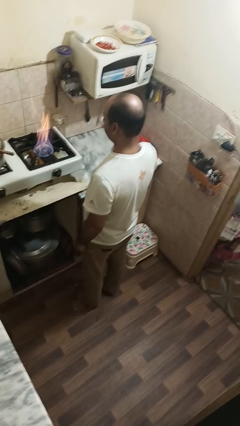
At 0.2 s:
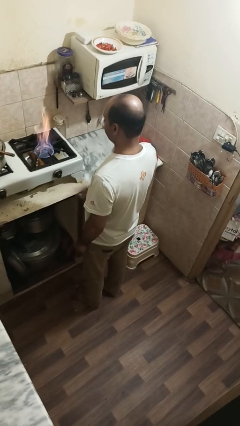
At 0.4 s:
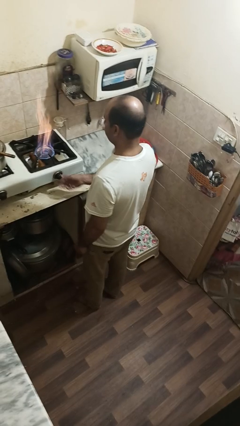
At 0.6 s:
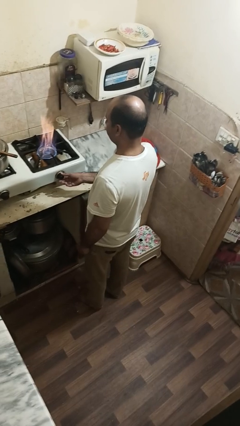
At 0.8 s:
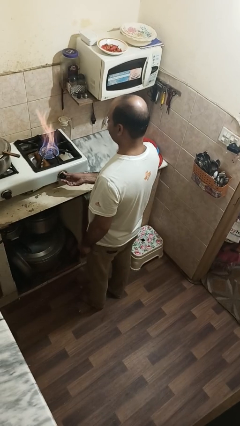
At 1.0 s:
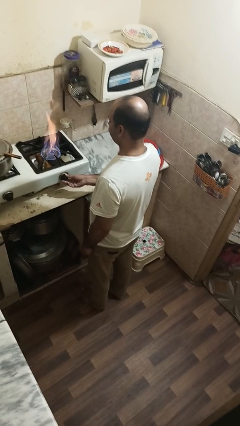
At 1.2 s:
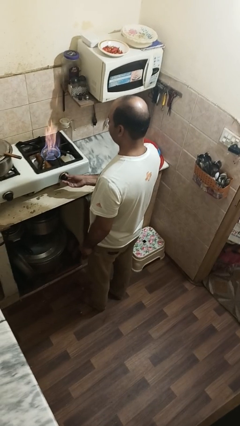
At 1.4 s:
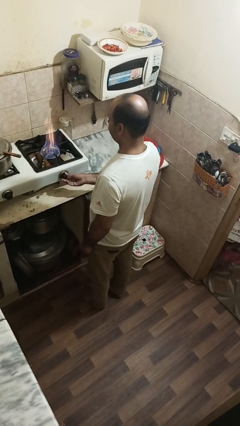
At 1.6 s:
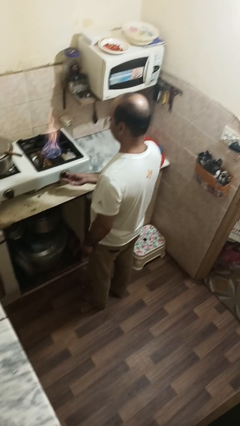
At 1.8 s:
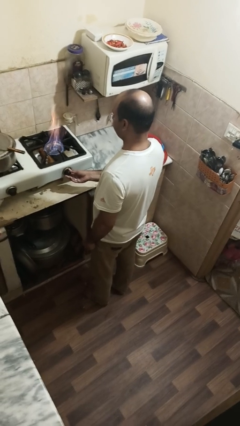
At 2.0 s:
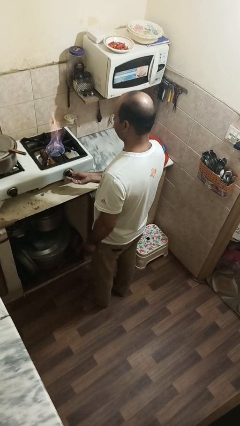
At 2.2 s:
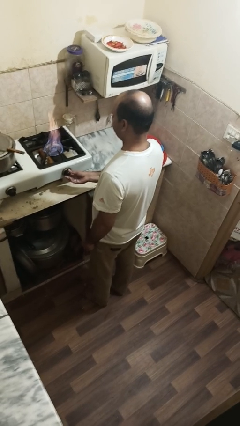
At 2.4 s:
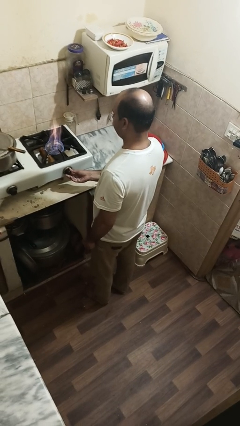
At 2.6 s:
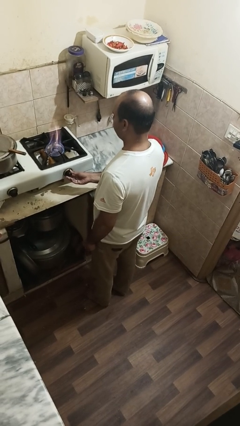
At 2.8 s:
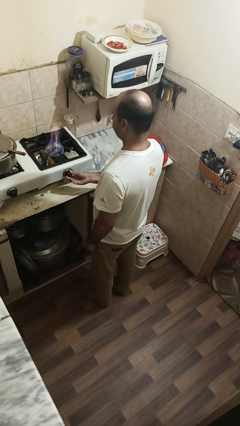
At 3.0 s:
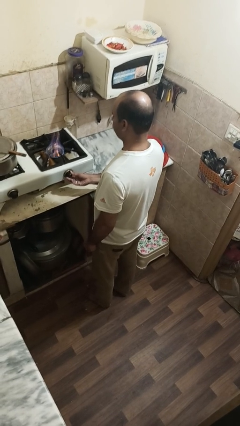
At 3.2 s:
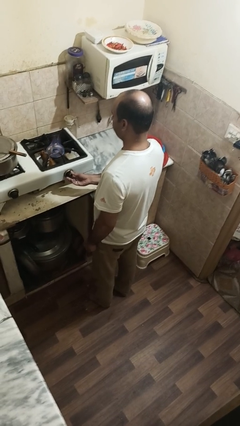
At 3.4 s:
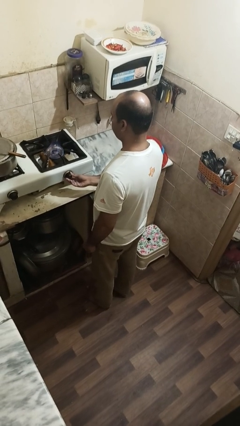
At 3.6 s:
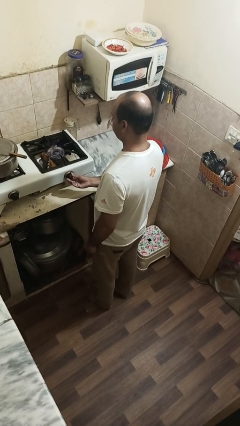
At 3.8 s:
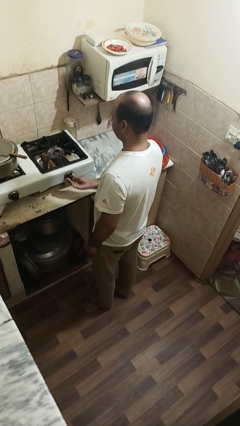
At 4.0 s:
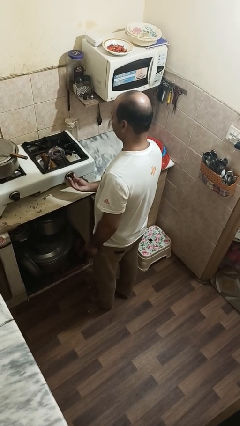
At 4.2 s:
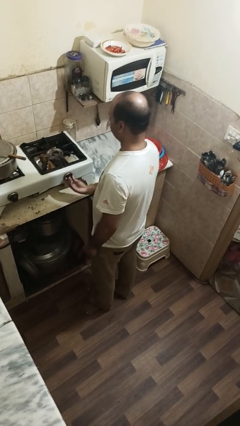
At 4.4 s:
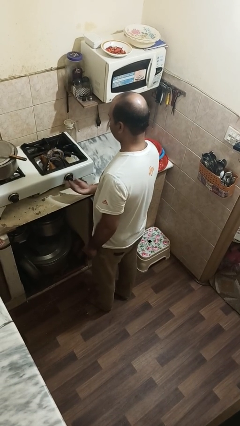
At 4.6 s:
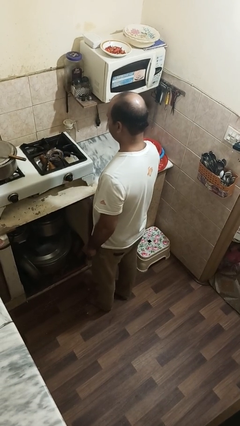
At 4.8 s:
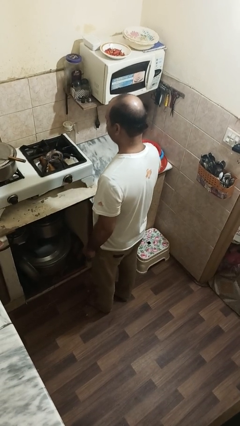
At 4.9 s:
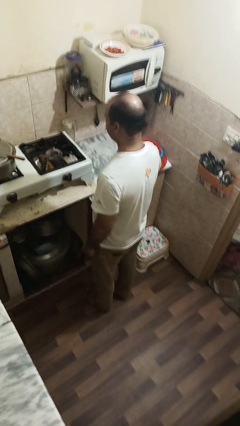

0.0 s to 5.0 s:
person turns off stovetop

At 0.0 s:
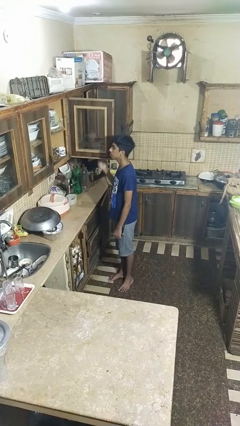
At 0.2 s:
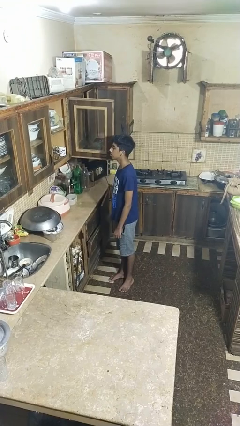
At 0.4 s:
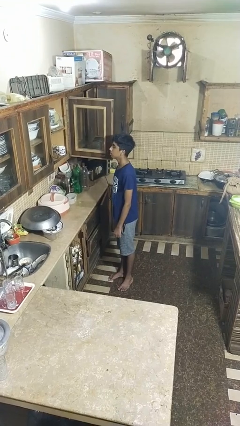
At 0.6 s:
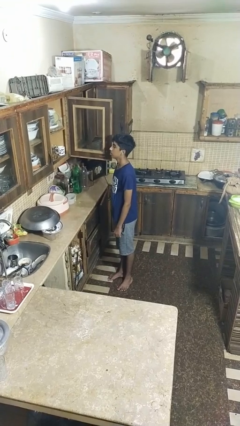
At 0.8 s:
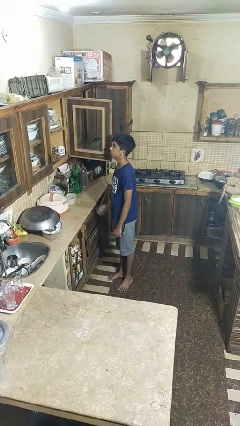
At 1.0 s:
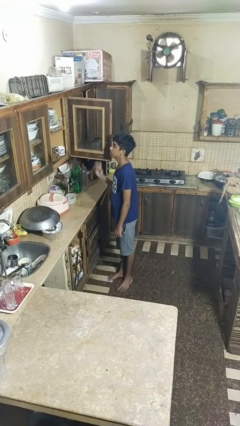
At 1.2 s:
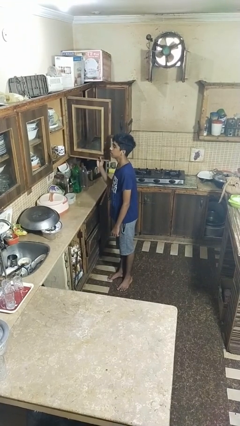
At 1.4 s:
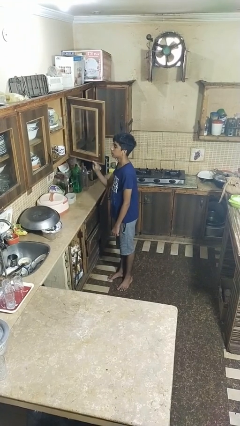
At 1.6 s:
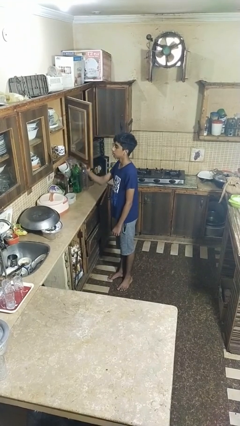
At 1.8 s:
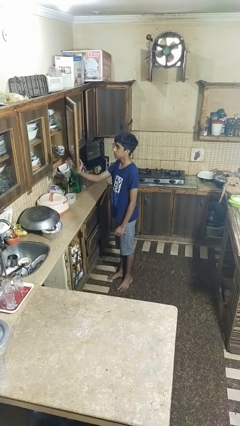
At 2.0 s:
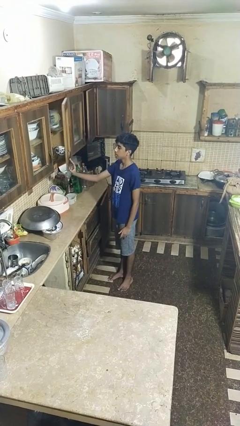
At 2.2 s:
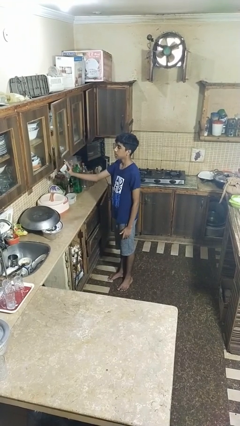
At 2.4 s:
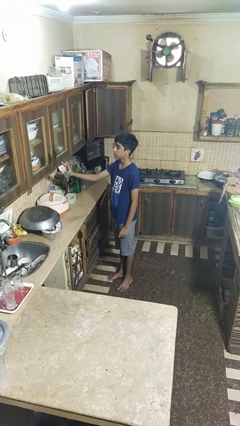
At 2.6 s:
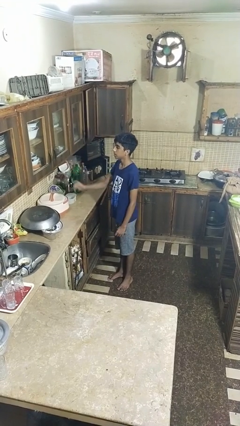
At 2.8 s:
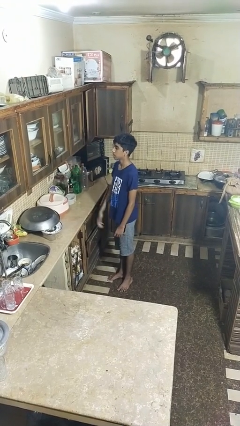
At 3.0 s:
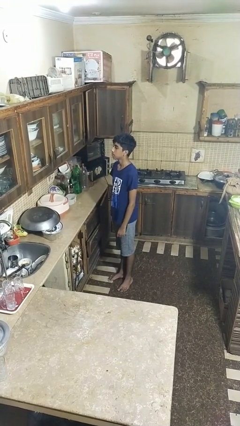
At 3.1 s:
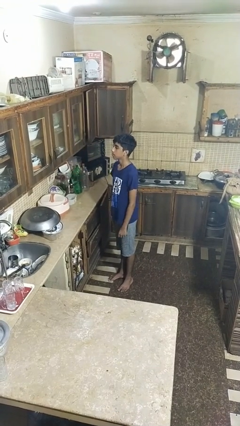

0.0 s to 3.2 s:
person closes cabinet

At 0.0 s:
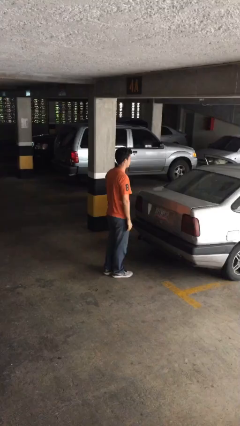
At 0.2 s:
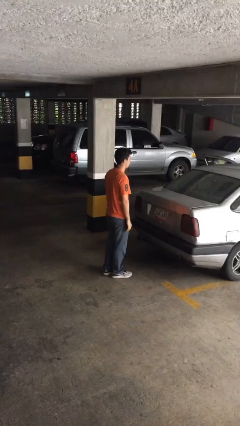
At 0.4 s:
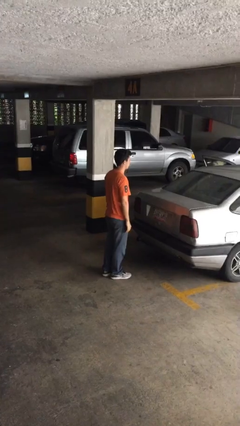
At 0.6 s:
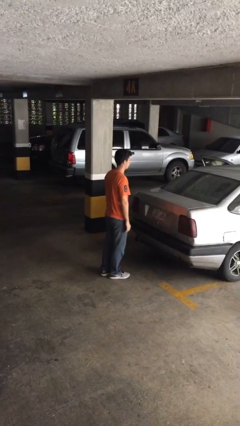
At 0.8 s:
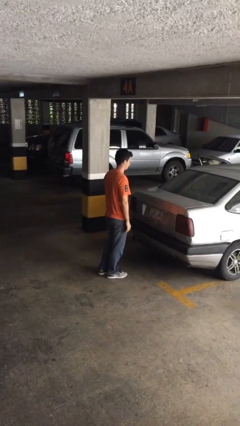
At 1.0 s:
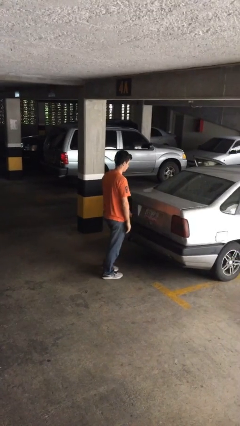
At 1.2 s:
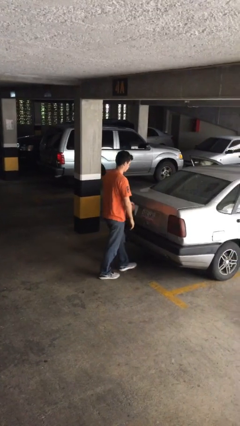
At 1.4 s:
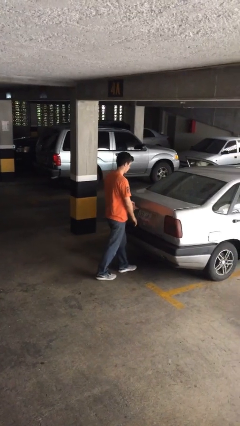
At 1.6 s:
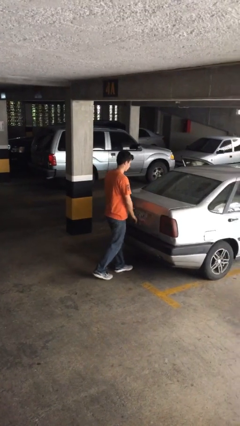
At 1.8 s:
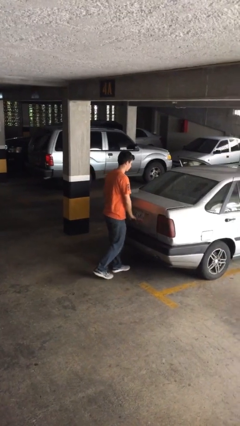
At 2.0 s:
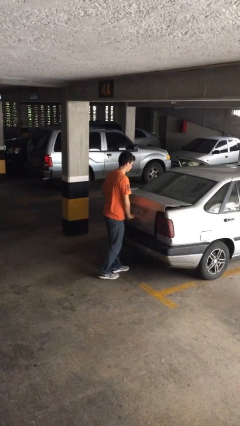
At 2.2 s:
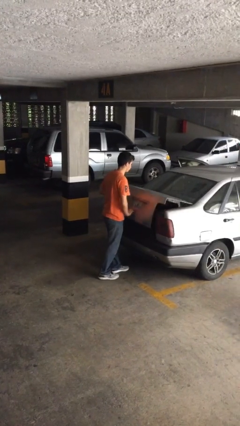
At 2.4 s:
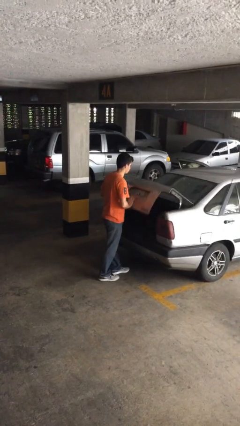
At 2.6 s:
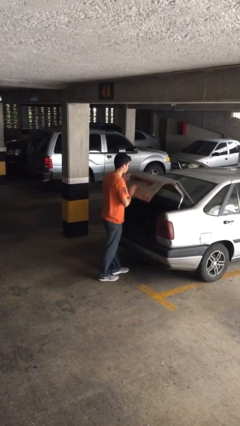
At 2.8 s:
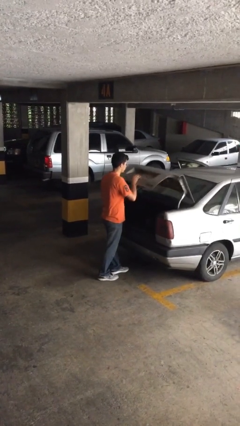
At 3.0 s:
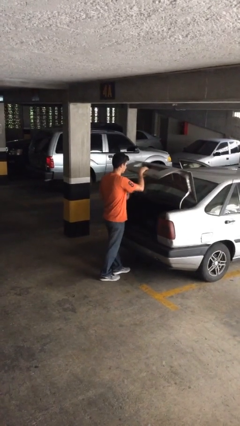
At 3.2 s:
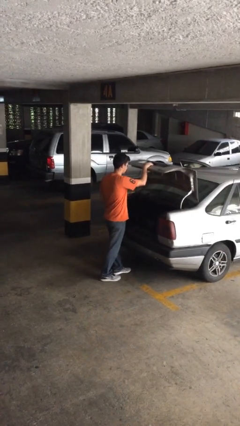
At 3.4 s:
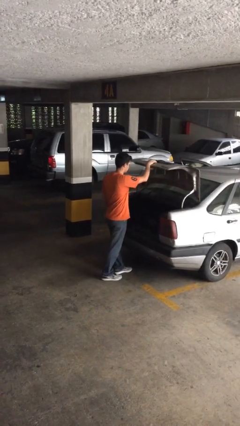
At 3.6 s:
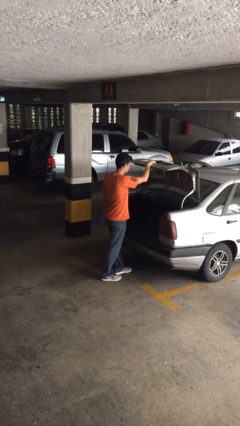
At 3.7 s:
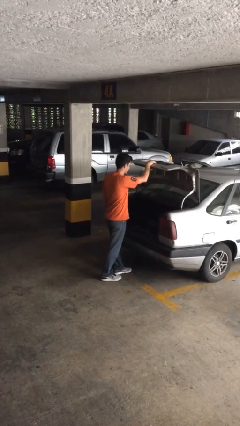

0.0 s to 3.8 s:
person opens car trunk

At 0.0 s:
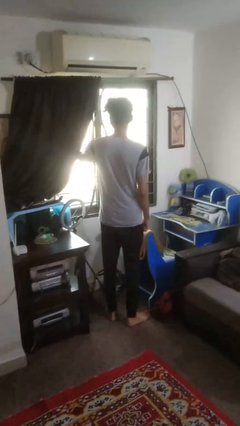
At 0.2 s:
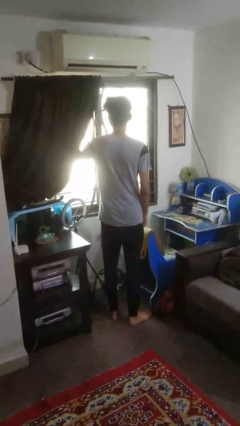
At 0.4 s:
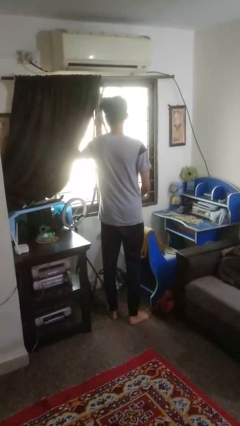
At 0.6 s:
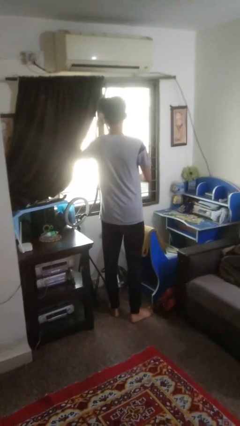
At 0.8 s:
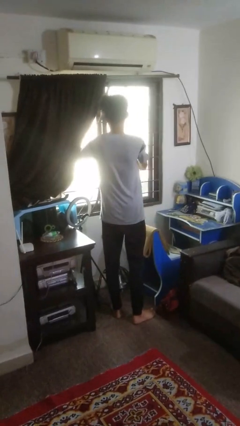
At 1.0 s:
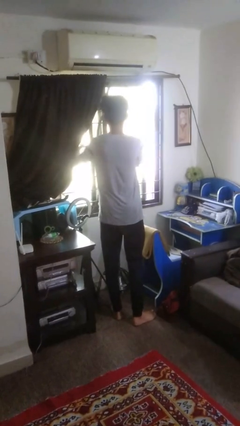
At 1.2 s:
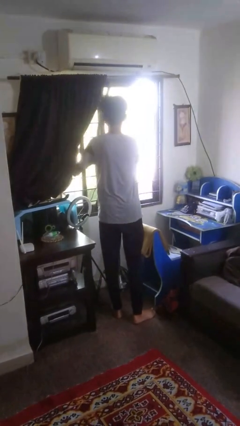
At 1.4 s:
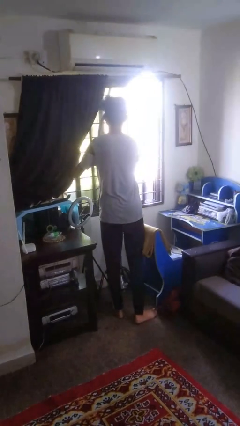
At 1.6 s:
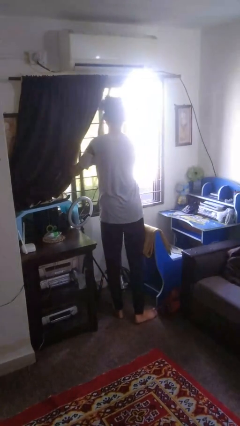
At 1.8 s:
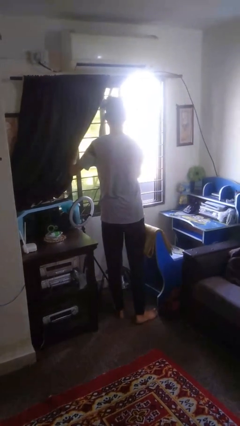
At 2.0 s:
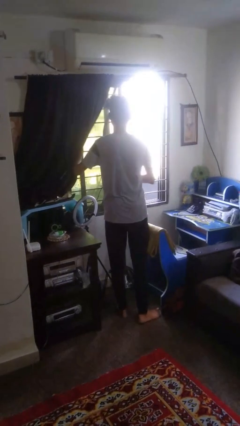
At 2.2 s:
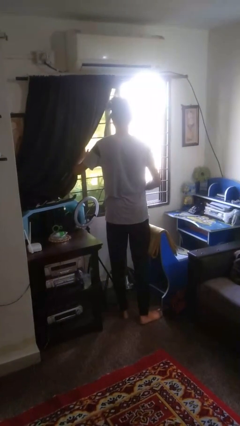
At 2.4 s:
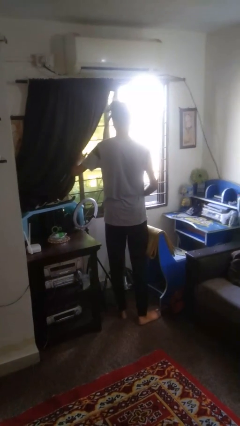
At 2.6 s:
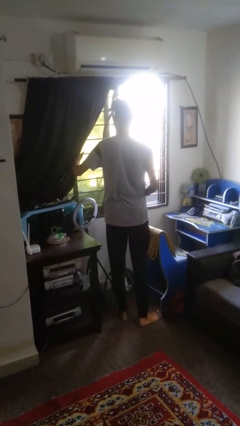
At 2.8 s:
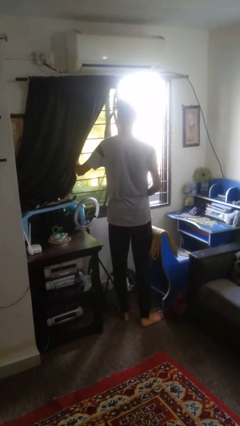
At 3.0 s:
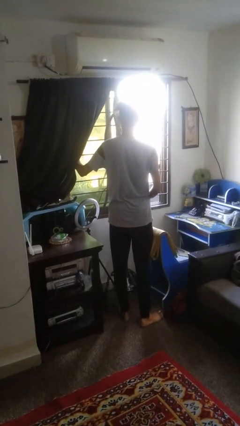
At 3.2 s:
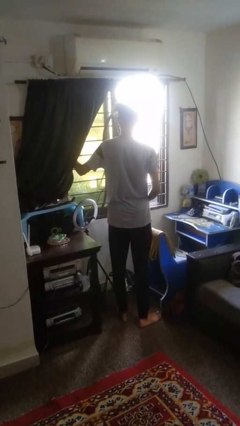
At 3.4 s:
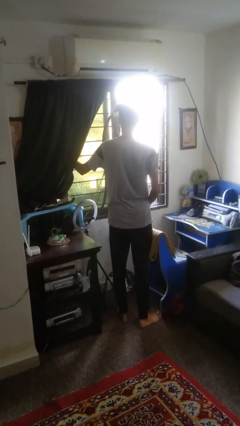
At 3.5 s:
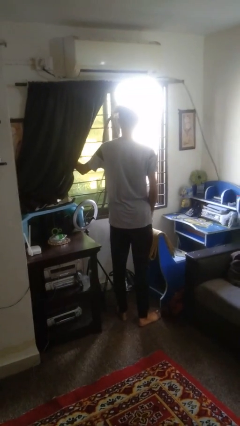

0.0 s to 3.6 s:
person opens home window

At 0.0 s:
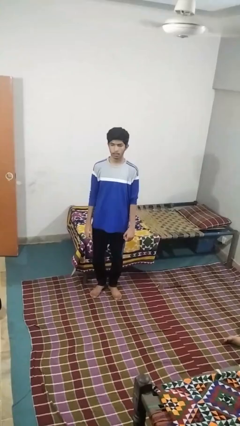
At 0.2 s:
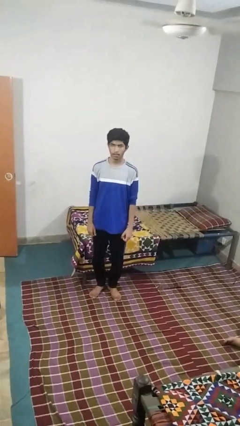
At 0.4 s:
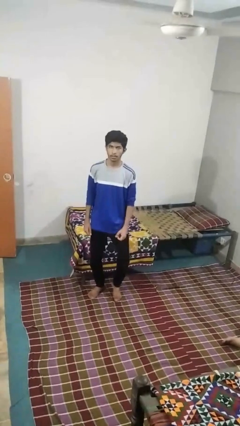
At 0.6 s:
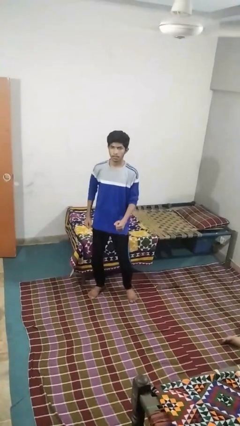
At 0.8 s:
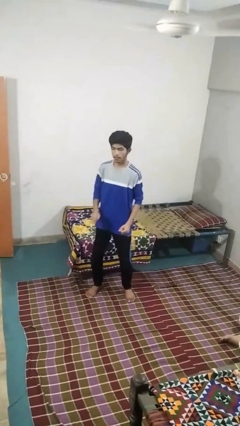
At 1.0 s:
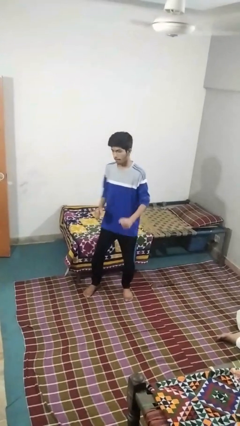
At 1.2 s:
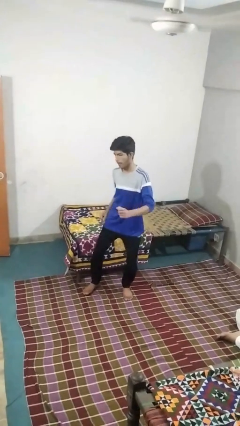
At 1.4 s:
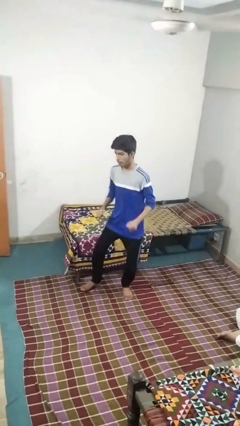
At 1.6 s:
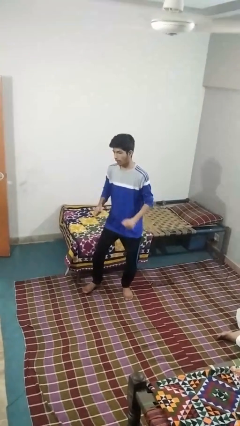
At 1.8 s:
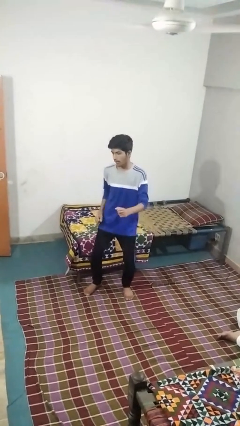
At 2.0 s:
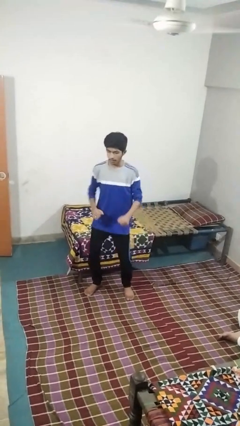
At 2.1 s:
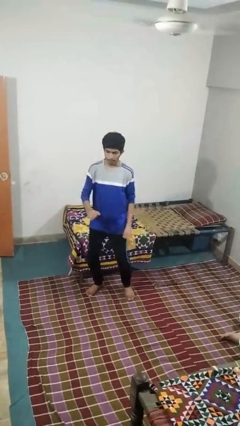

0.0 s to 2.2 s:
person dances in place
